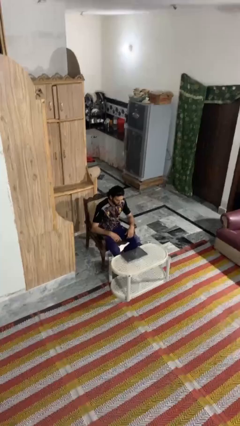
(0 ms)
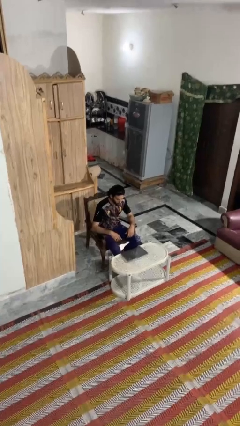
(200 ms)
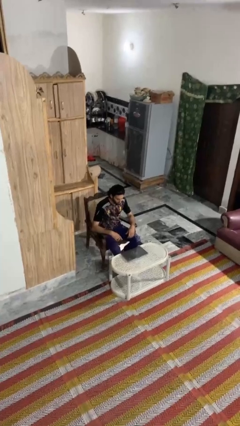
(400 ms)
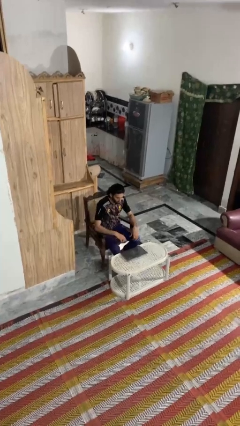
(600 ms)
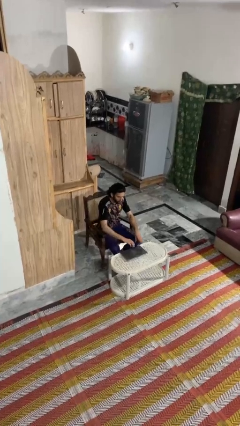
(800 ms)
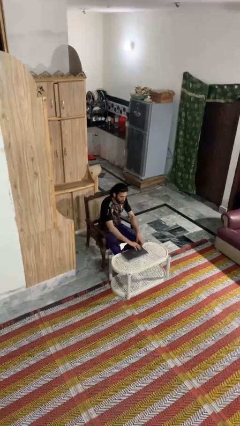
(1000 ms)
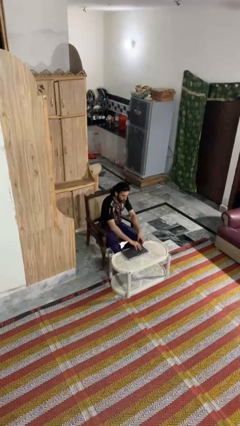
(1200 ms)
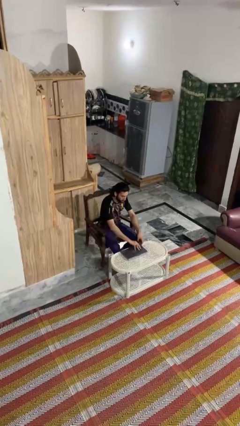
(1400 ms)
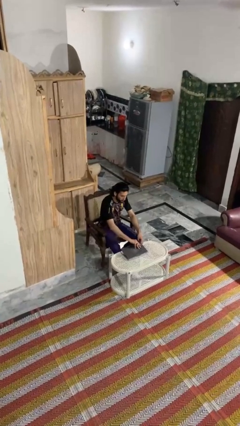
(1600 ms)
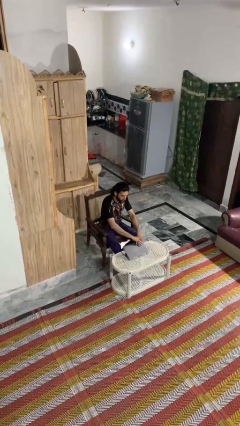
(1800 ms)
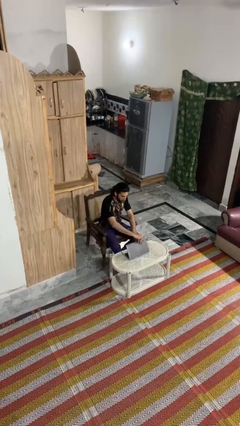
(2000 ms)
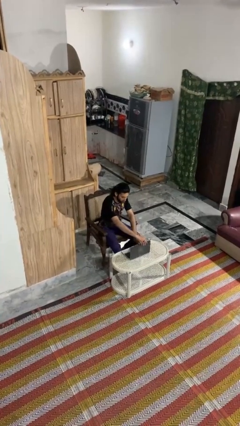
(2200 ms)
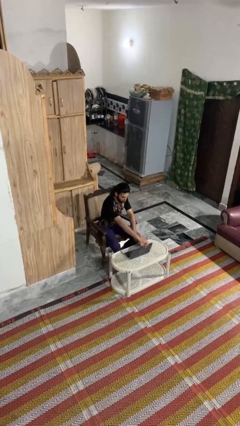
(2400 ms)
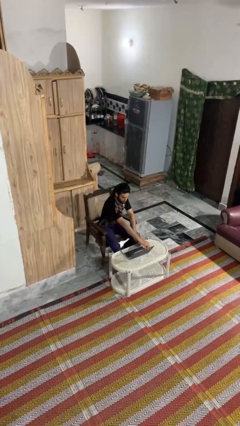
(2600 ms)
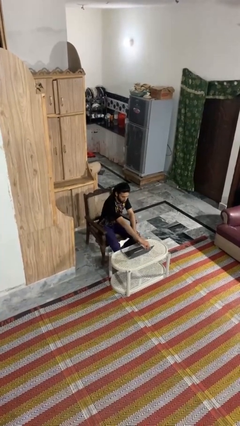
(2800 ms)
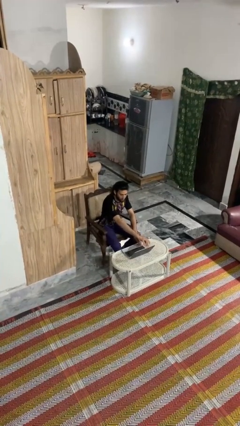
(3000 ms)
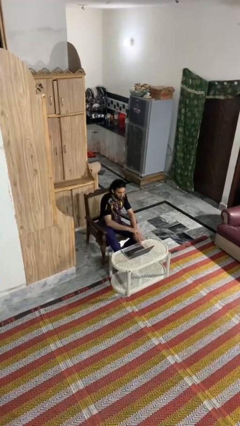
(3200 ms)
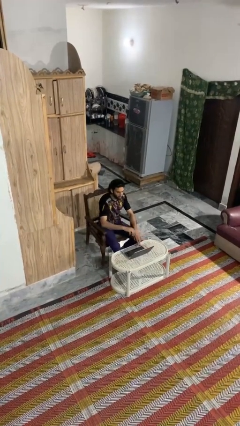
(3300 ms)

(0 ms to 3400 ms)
person opens laptop

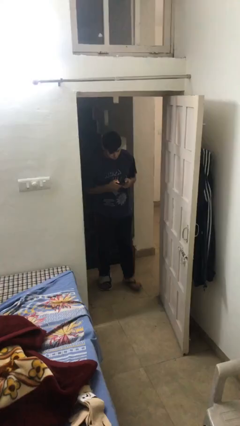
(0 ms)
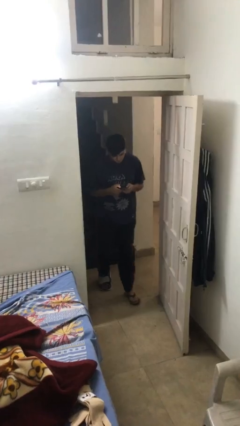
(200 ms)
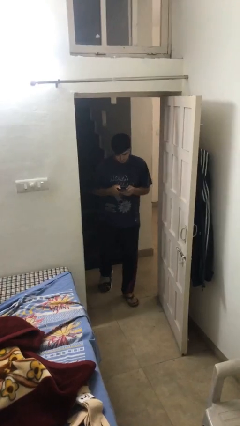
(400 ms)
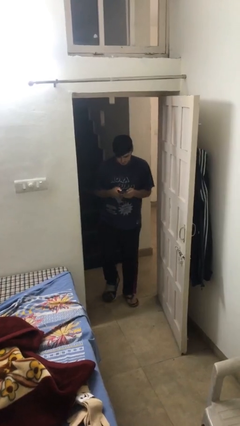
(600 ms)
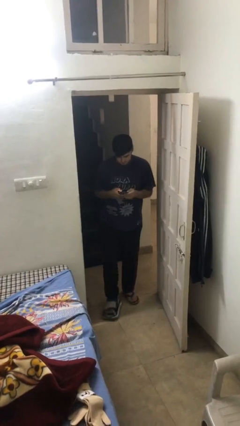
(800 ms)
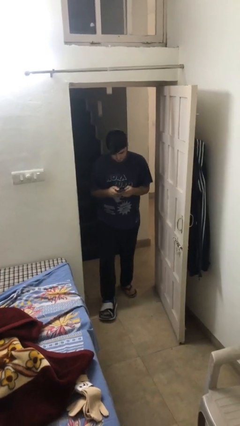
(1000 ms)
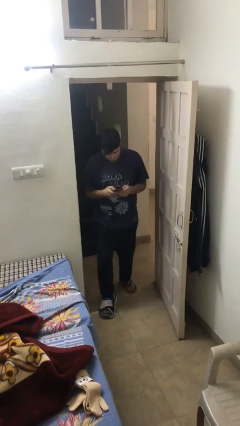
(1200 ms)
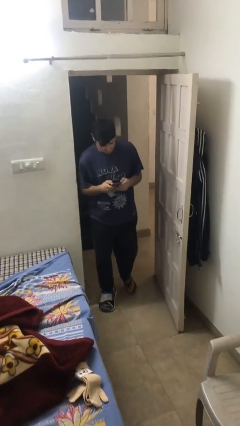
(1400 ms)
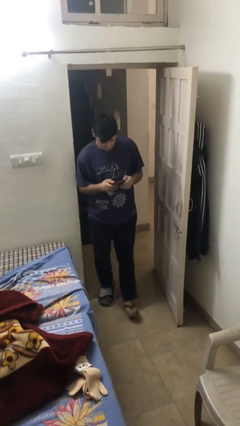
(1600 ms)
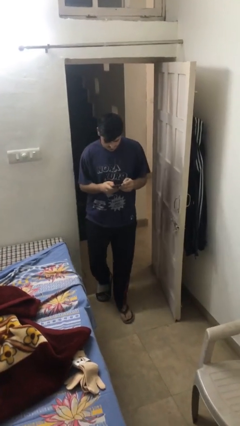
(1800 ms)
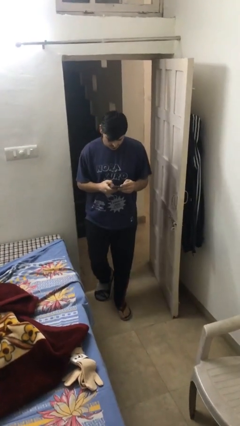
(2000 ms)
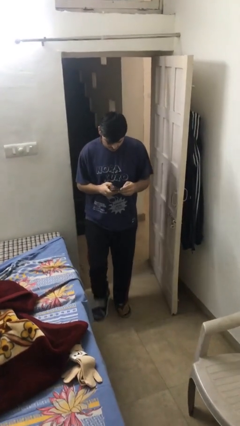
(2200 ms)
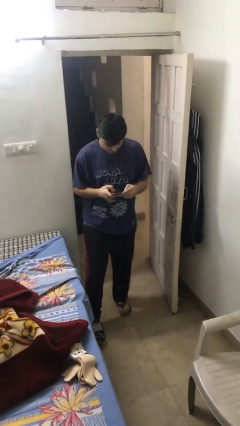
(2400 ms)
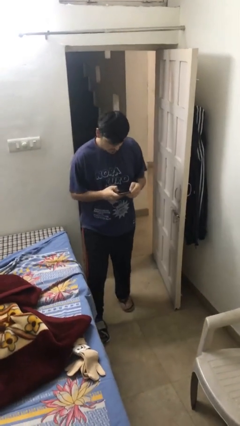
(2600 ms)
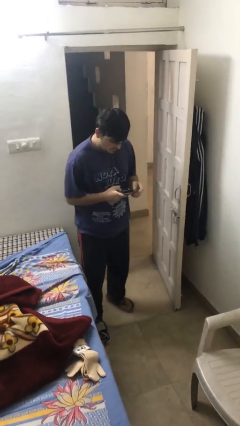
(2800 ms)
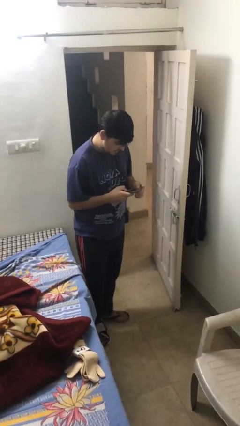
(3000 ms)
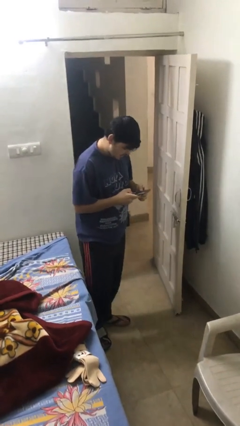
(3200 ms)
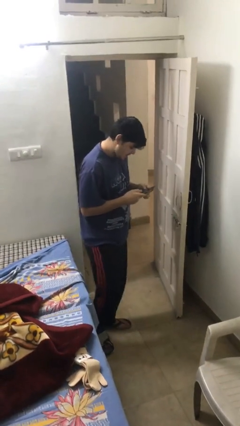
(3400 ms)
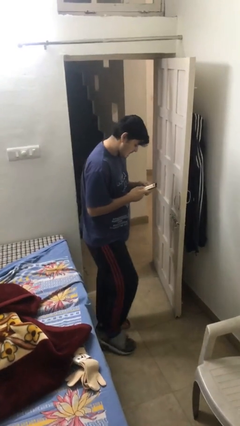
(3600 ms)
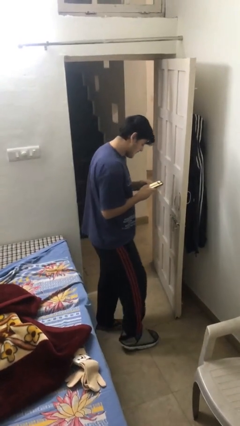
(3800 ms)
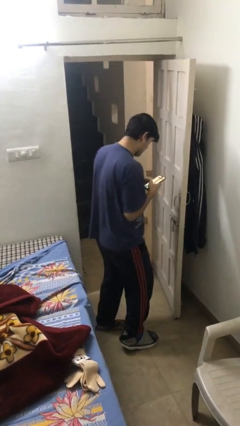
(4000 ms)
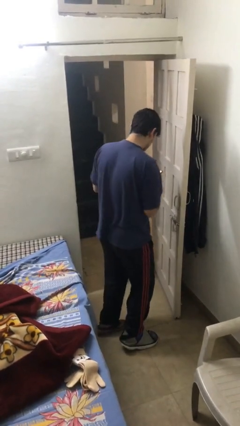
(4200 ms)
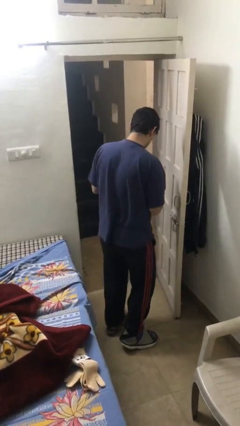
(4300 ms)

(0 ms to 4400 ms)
person enters scene through structure

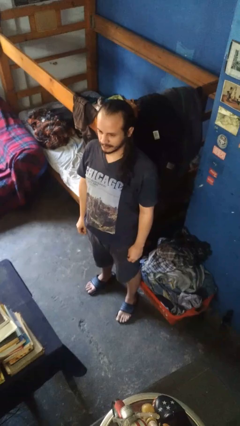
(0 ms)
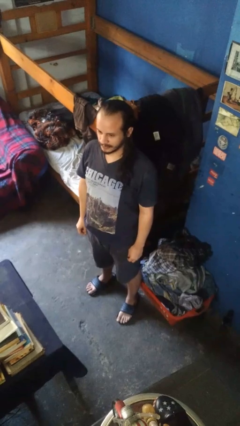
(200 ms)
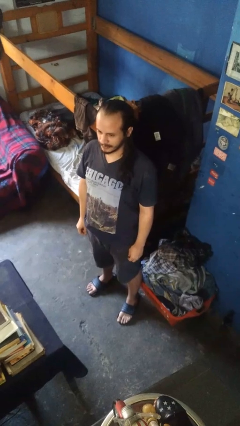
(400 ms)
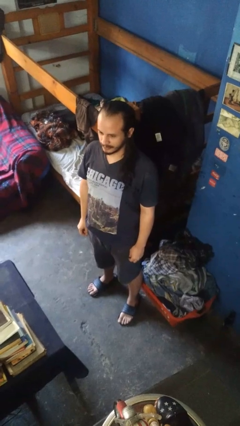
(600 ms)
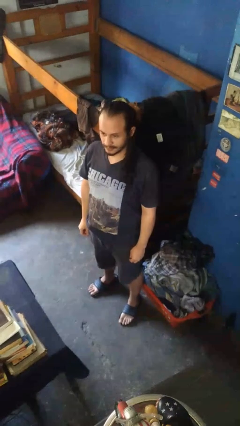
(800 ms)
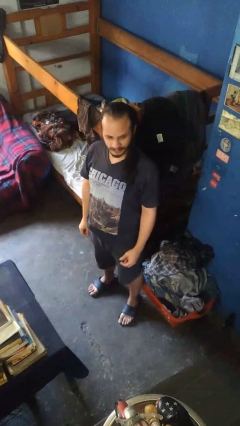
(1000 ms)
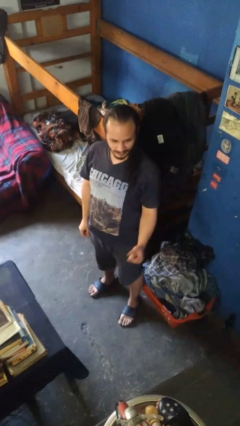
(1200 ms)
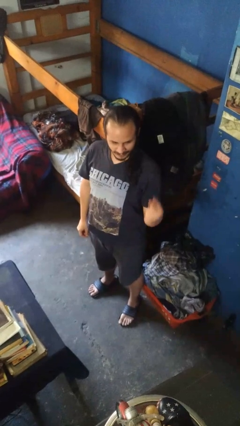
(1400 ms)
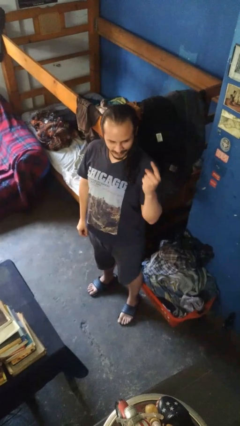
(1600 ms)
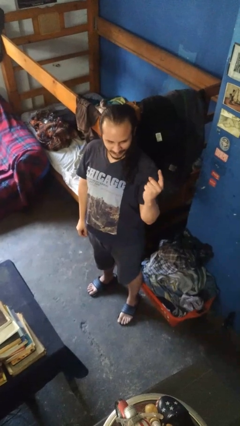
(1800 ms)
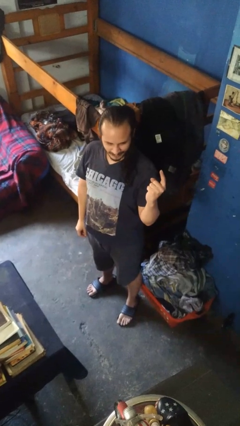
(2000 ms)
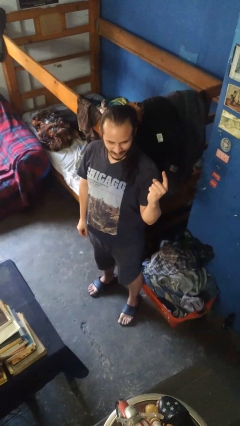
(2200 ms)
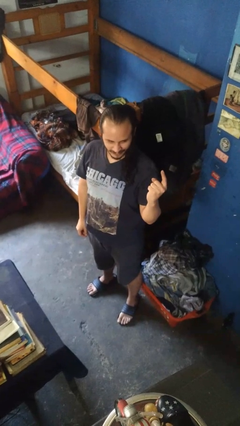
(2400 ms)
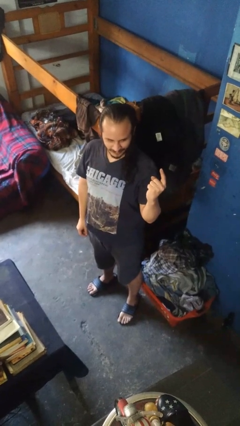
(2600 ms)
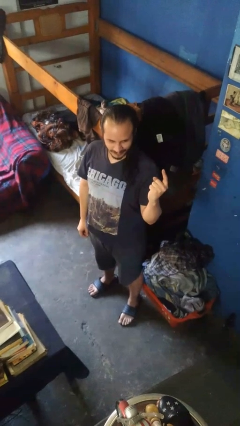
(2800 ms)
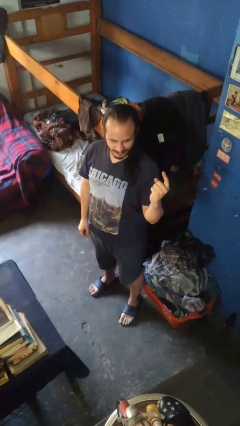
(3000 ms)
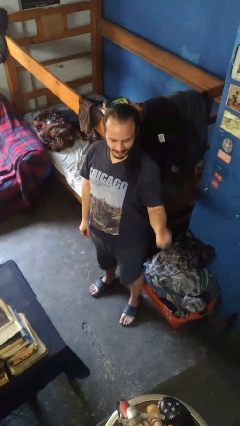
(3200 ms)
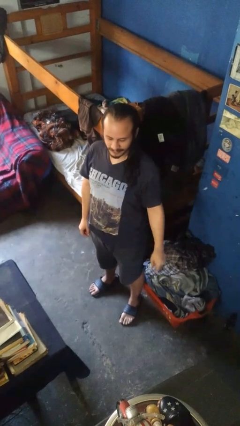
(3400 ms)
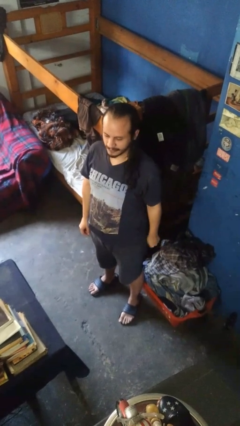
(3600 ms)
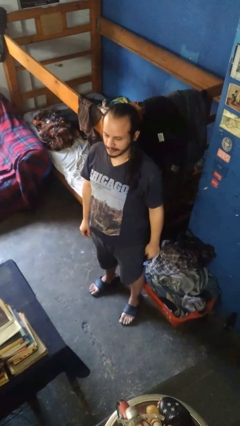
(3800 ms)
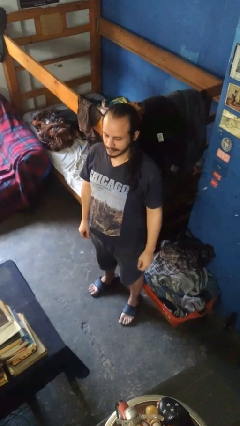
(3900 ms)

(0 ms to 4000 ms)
person gestures number one

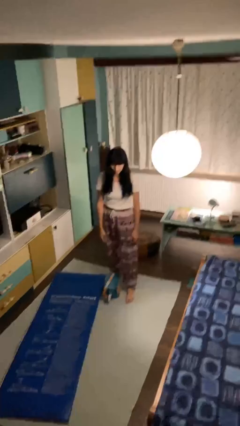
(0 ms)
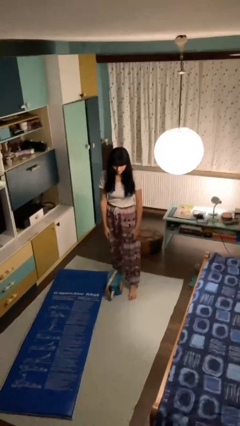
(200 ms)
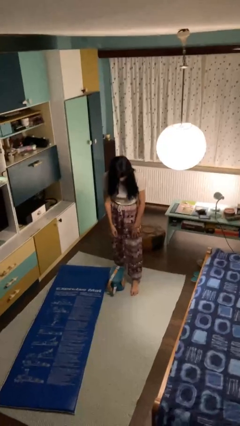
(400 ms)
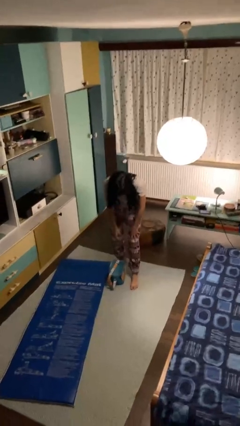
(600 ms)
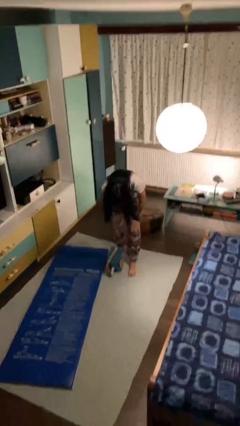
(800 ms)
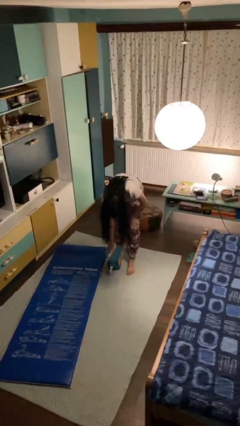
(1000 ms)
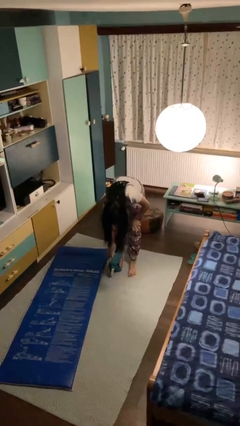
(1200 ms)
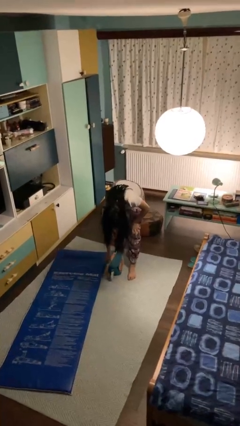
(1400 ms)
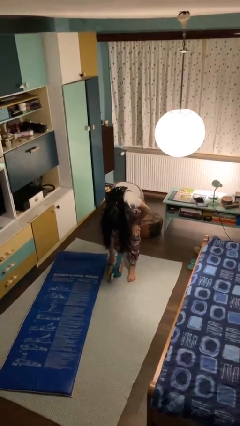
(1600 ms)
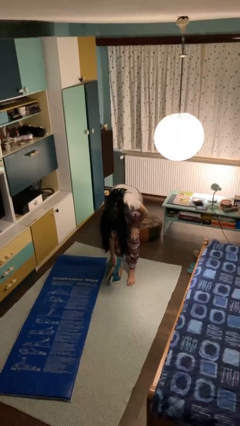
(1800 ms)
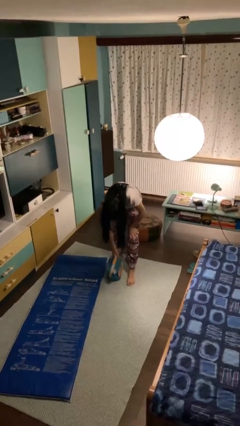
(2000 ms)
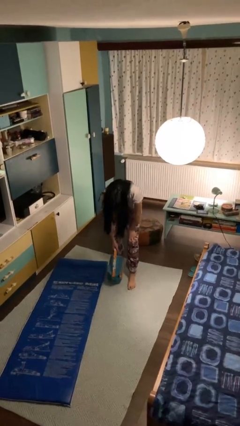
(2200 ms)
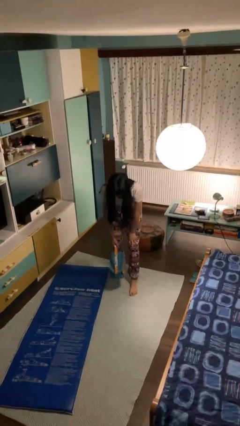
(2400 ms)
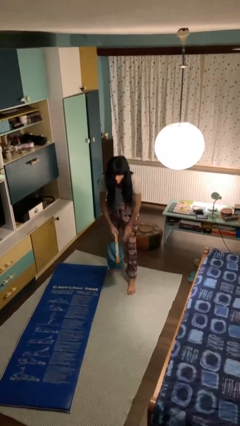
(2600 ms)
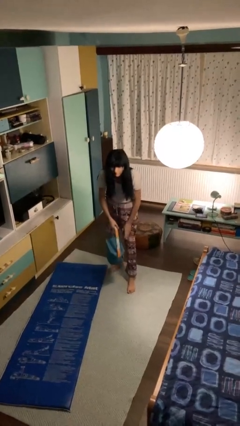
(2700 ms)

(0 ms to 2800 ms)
person picks up object from floor

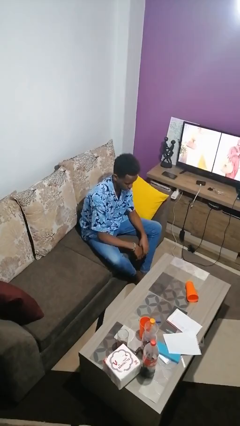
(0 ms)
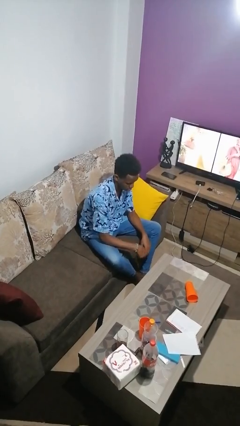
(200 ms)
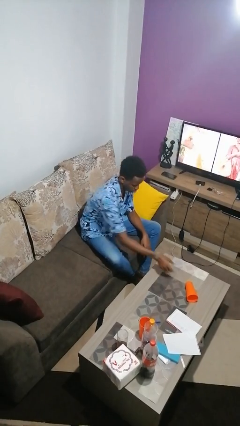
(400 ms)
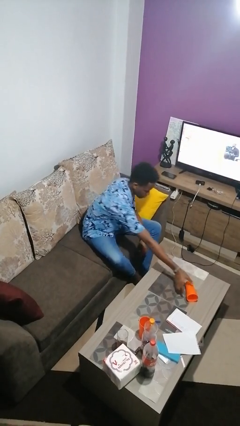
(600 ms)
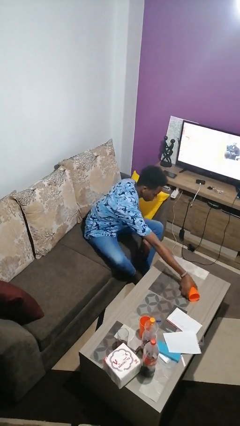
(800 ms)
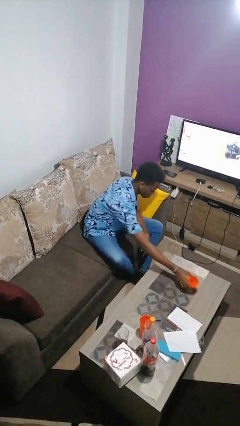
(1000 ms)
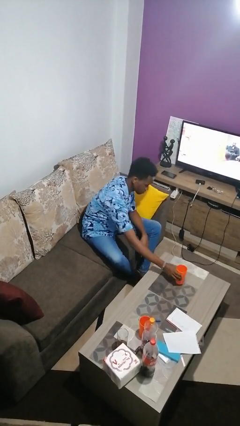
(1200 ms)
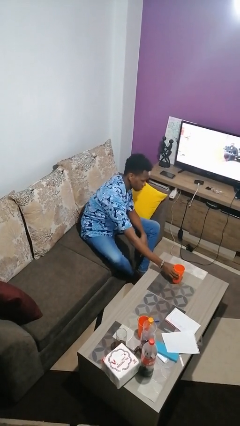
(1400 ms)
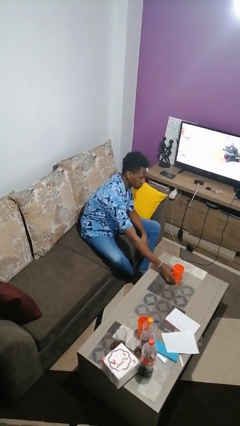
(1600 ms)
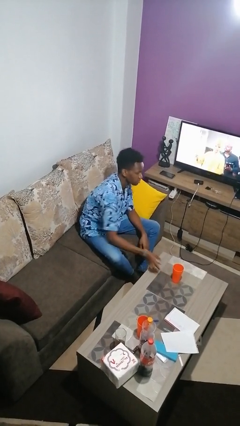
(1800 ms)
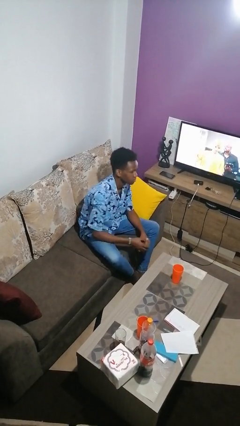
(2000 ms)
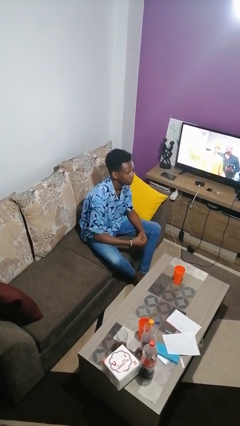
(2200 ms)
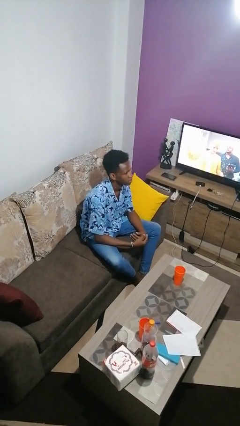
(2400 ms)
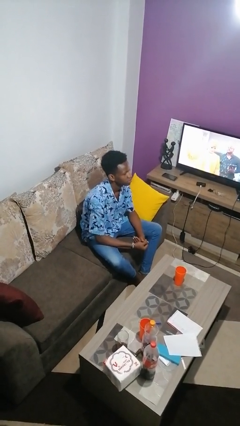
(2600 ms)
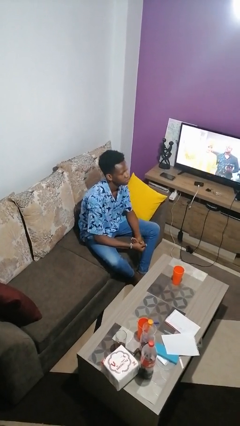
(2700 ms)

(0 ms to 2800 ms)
person sets upright glass
